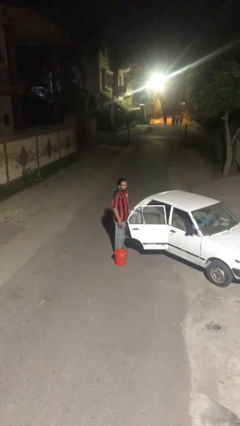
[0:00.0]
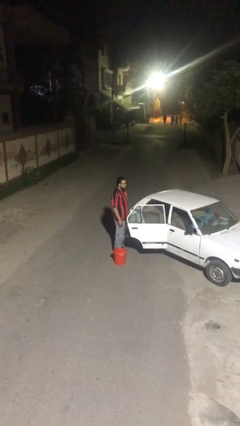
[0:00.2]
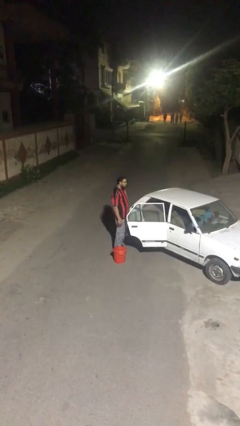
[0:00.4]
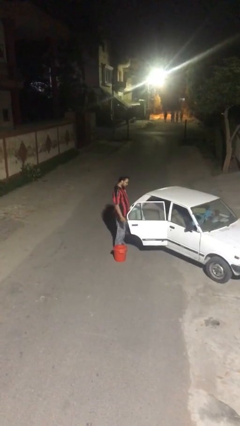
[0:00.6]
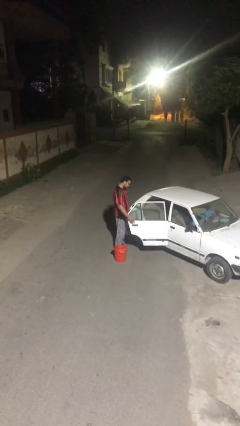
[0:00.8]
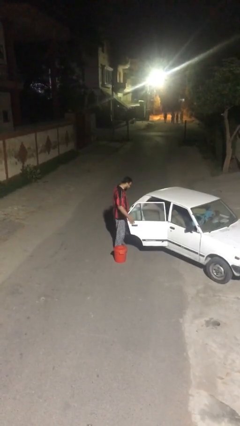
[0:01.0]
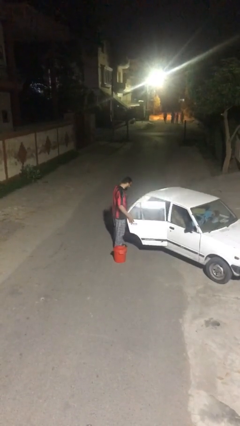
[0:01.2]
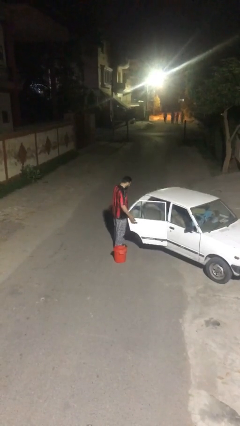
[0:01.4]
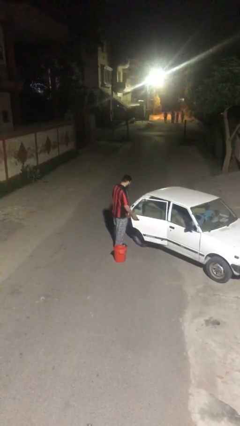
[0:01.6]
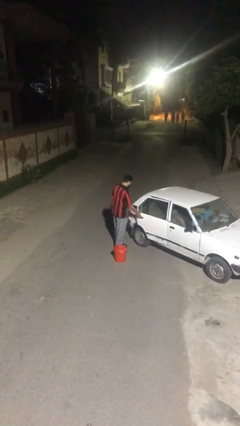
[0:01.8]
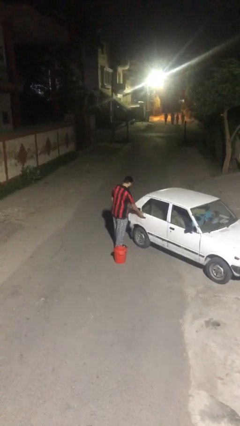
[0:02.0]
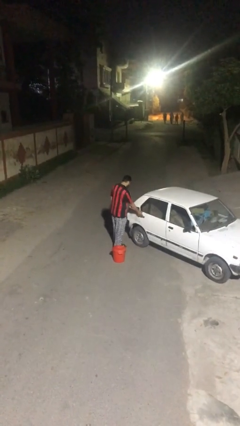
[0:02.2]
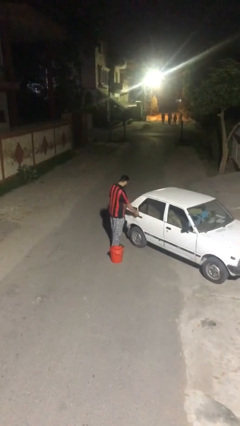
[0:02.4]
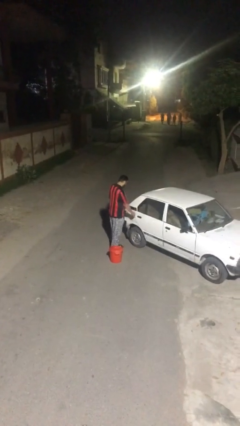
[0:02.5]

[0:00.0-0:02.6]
person closes car door

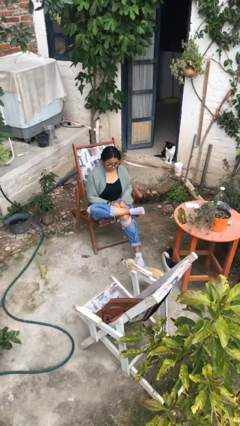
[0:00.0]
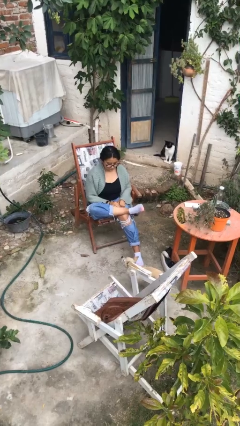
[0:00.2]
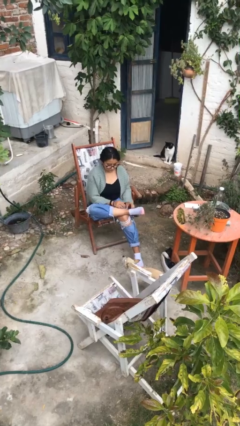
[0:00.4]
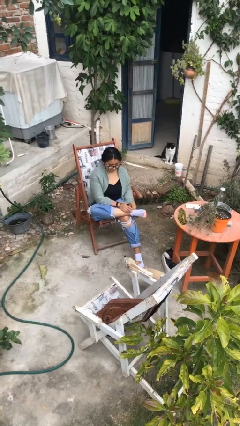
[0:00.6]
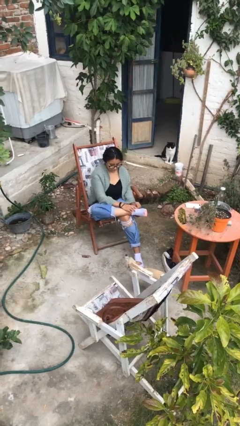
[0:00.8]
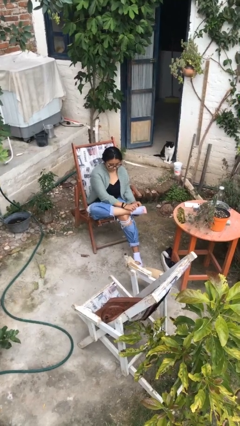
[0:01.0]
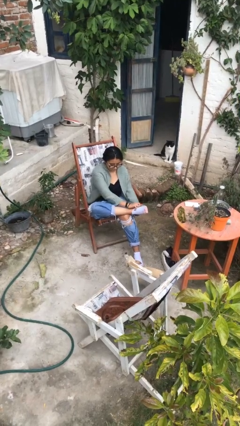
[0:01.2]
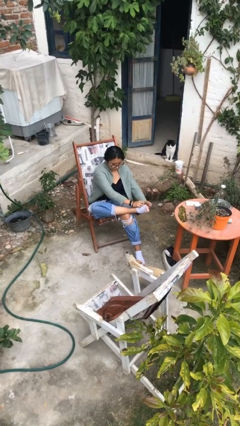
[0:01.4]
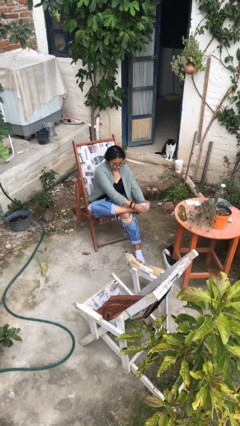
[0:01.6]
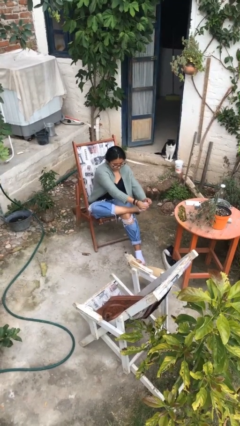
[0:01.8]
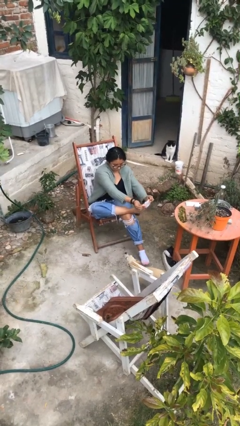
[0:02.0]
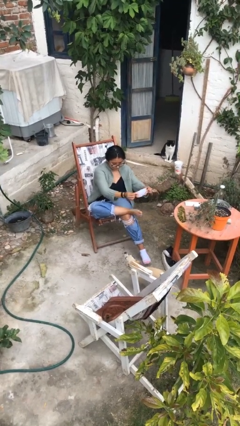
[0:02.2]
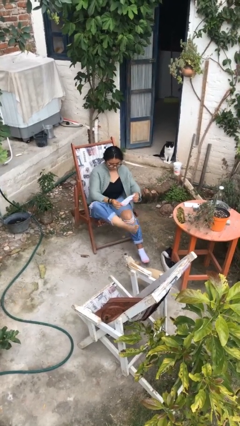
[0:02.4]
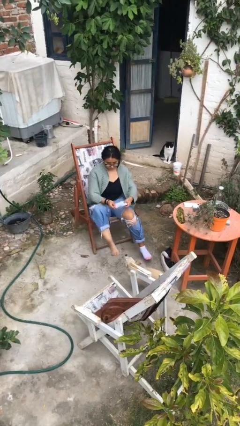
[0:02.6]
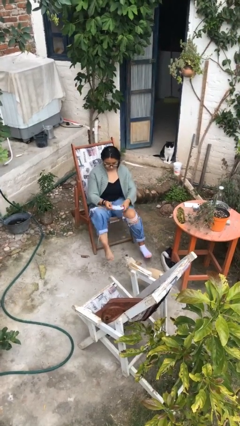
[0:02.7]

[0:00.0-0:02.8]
person takes off socks

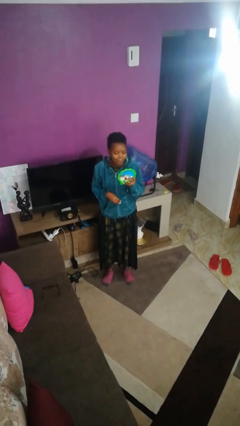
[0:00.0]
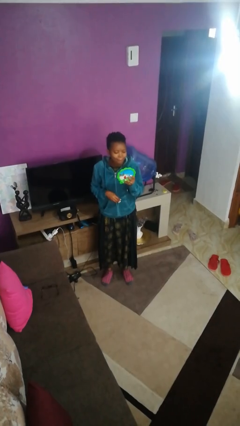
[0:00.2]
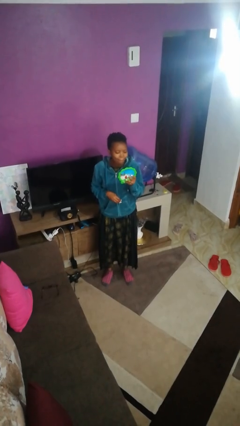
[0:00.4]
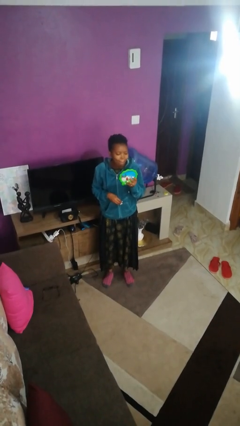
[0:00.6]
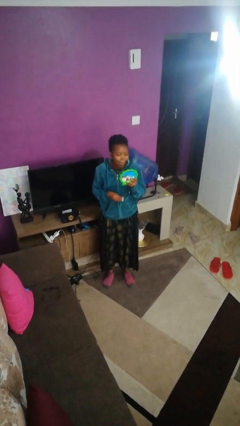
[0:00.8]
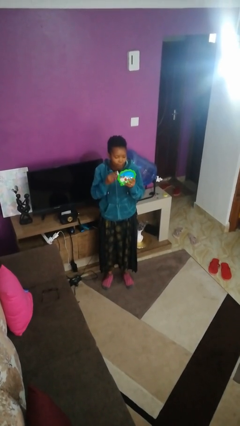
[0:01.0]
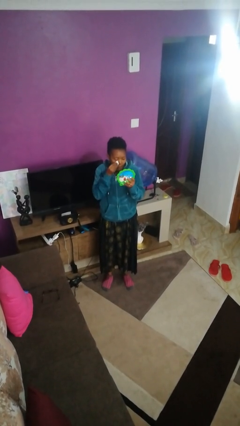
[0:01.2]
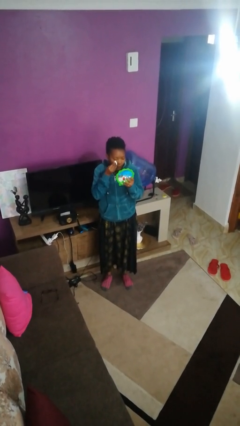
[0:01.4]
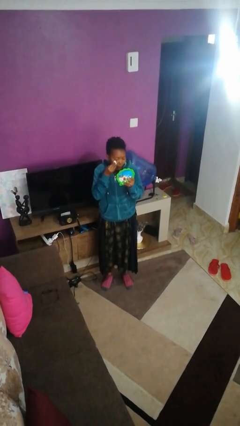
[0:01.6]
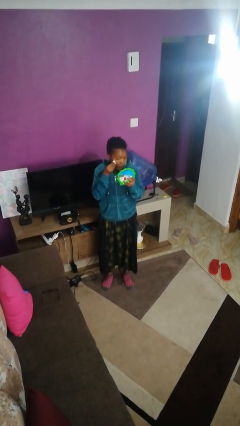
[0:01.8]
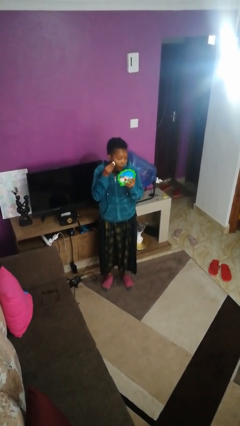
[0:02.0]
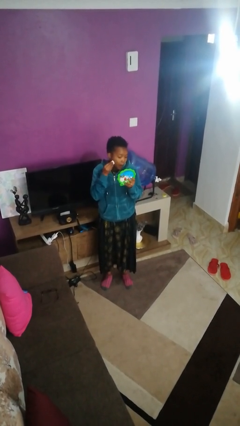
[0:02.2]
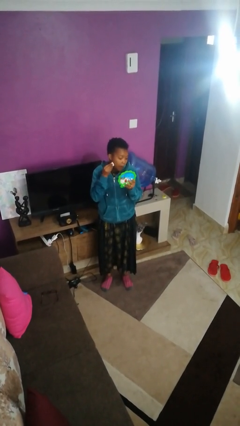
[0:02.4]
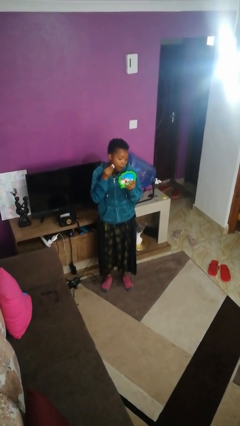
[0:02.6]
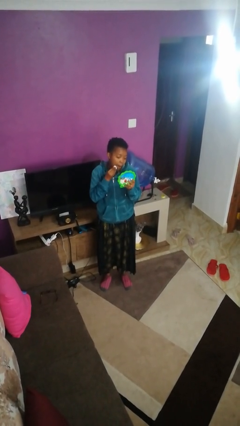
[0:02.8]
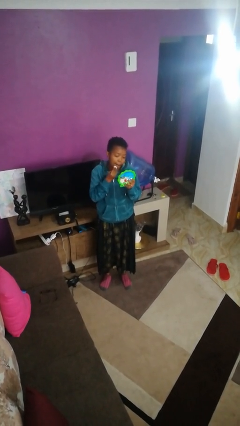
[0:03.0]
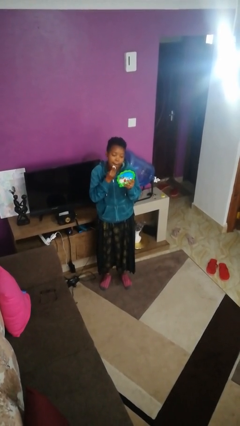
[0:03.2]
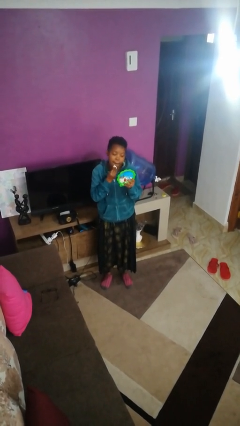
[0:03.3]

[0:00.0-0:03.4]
person applies foundation makeup

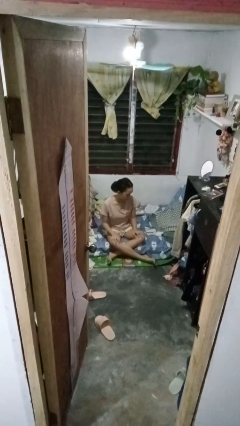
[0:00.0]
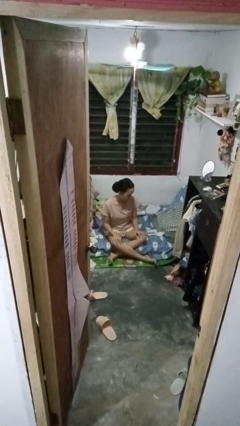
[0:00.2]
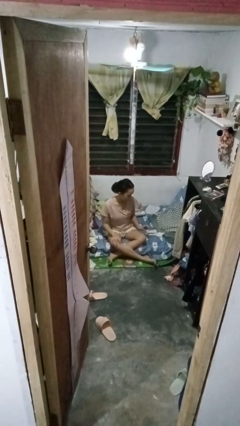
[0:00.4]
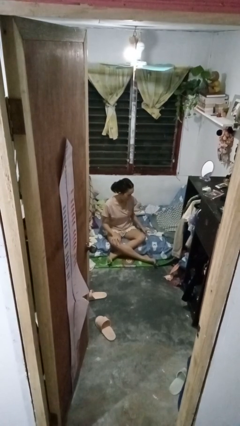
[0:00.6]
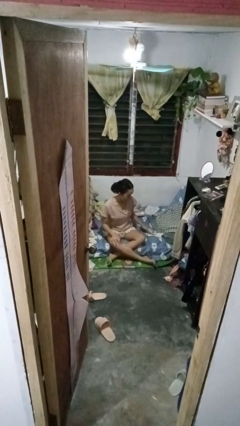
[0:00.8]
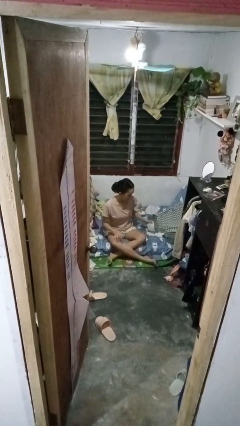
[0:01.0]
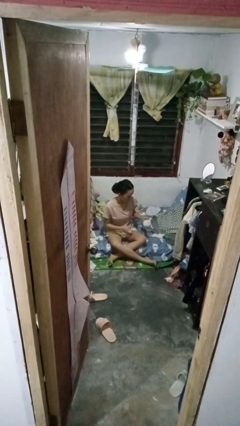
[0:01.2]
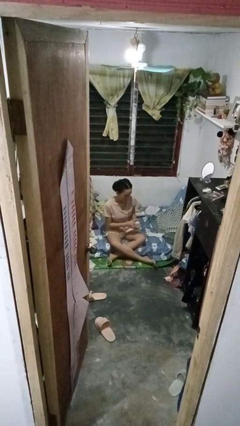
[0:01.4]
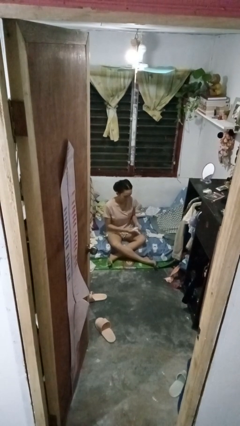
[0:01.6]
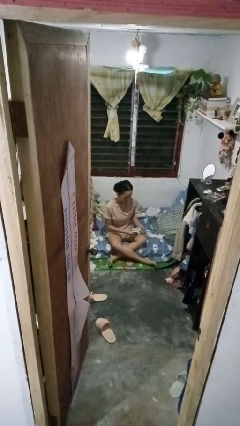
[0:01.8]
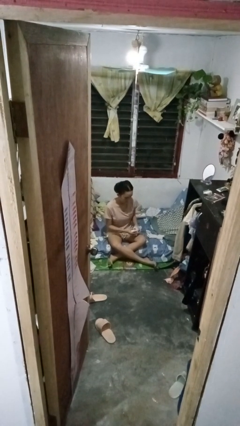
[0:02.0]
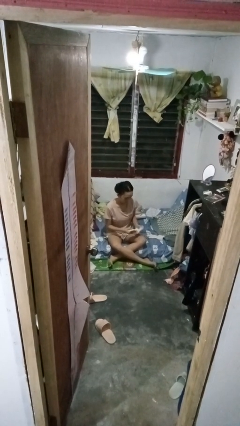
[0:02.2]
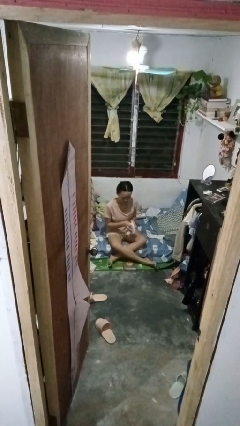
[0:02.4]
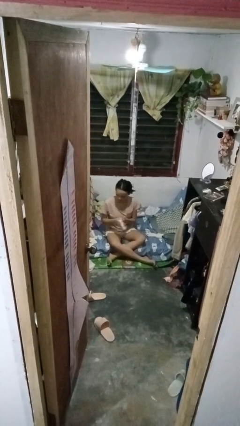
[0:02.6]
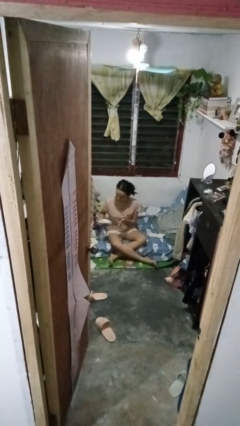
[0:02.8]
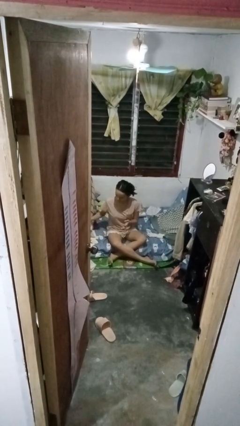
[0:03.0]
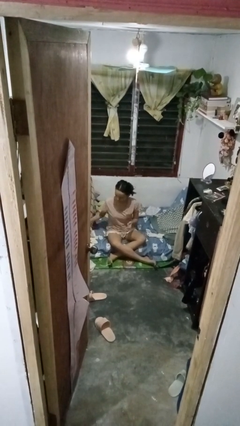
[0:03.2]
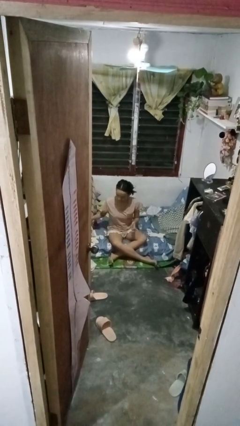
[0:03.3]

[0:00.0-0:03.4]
person folds socks

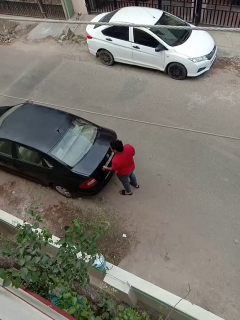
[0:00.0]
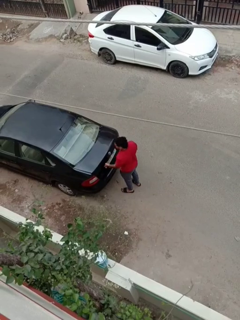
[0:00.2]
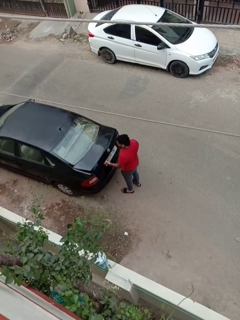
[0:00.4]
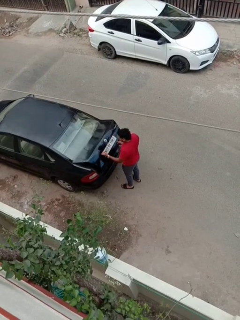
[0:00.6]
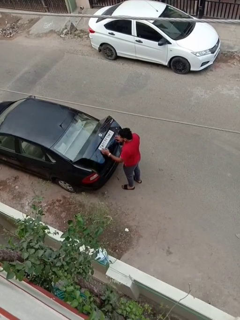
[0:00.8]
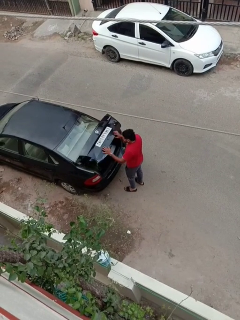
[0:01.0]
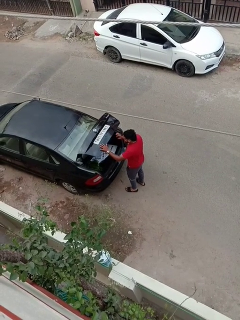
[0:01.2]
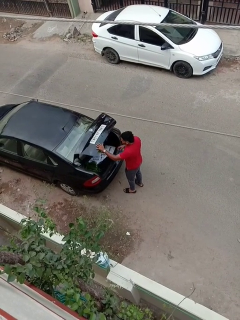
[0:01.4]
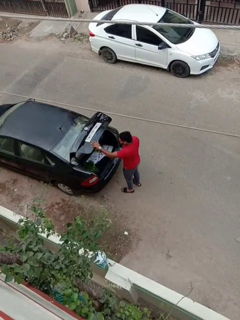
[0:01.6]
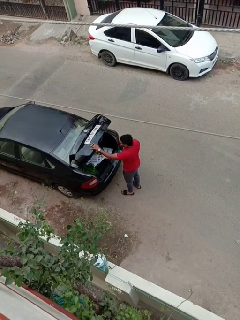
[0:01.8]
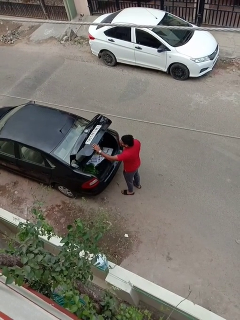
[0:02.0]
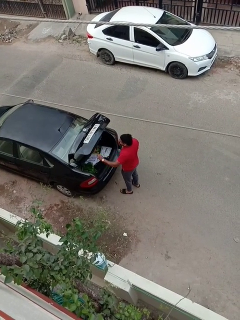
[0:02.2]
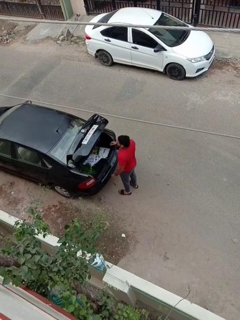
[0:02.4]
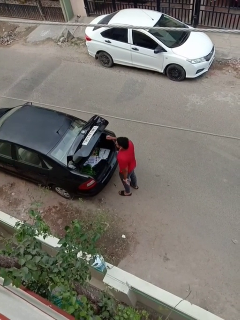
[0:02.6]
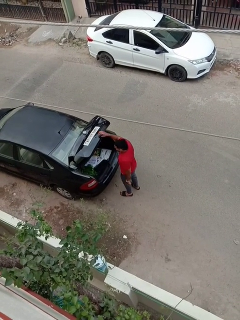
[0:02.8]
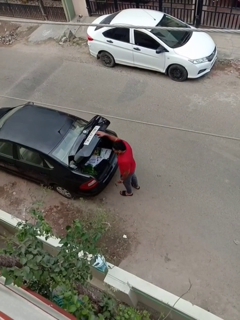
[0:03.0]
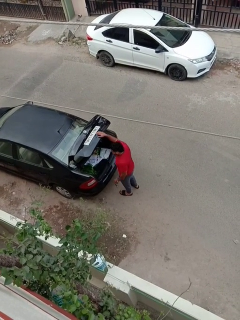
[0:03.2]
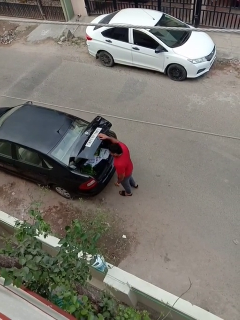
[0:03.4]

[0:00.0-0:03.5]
person opens car trunk

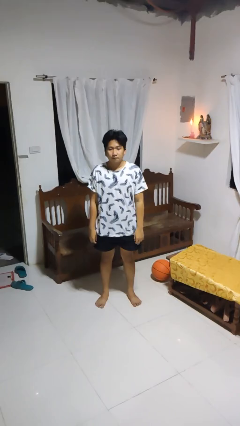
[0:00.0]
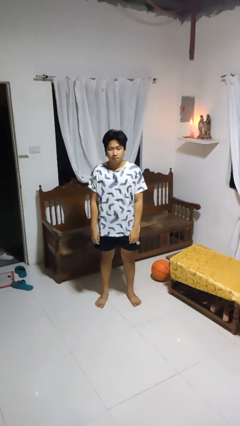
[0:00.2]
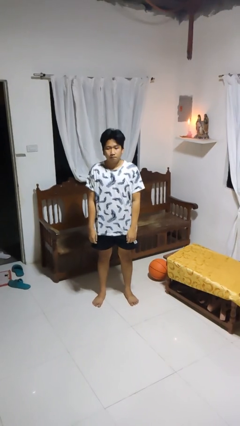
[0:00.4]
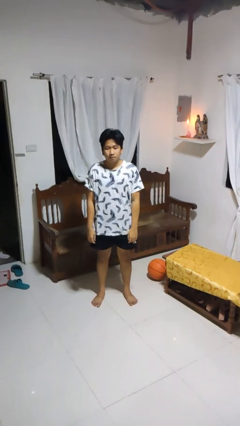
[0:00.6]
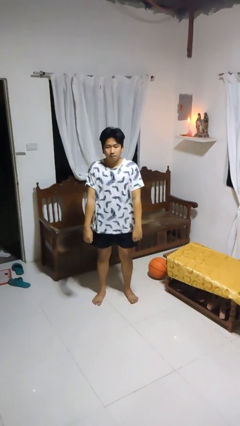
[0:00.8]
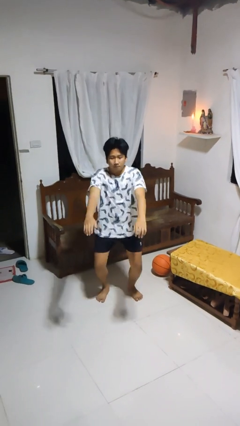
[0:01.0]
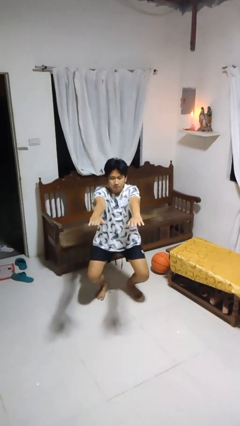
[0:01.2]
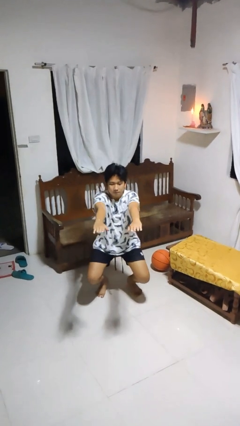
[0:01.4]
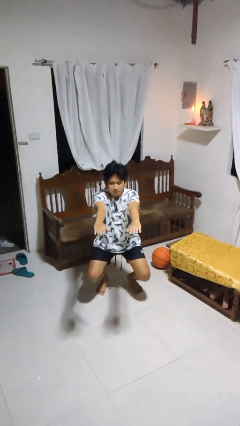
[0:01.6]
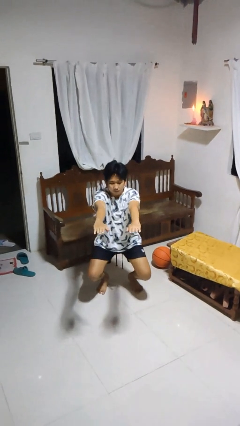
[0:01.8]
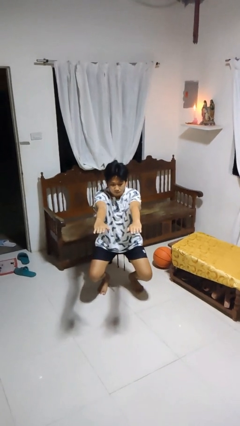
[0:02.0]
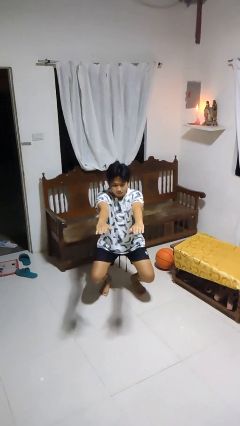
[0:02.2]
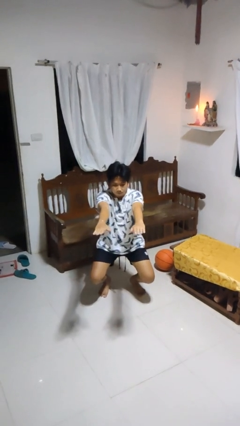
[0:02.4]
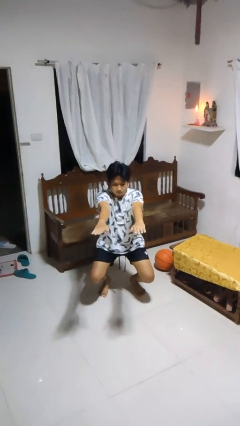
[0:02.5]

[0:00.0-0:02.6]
person squats
